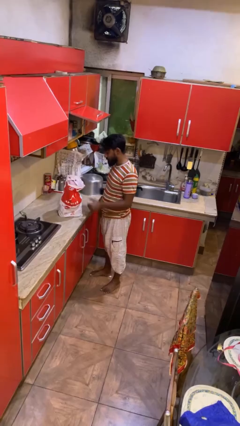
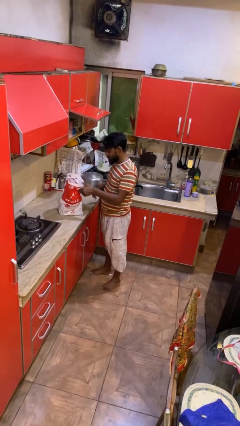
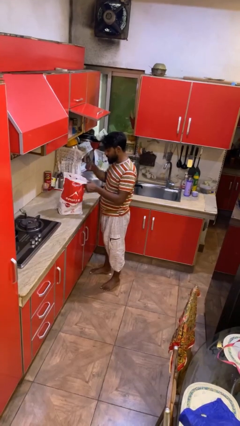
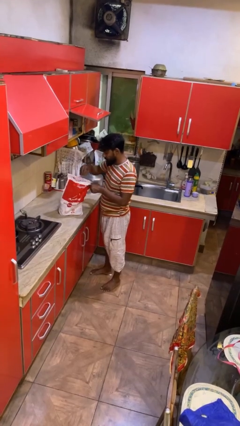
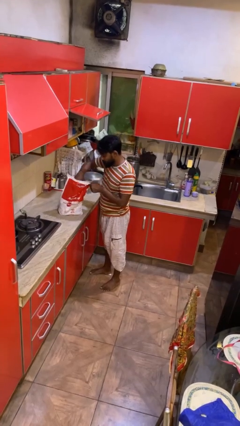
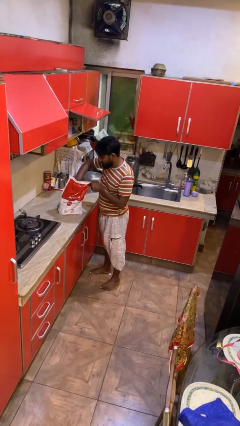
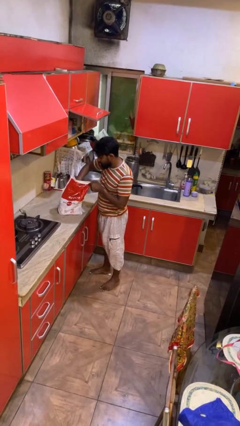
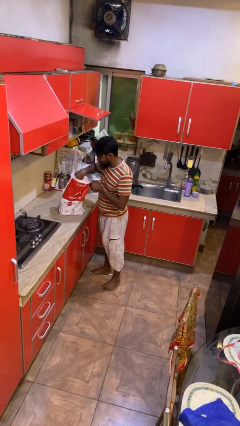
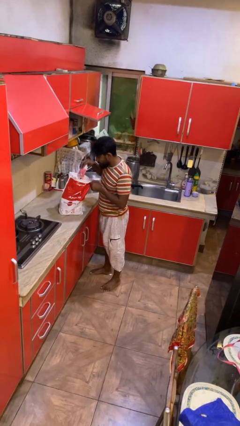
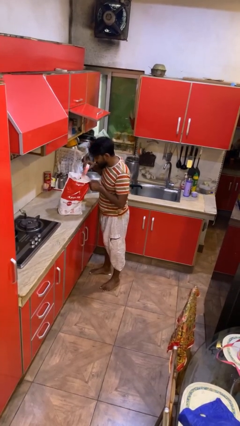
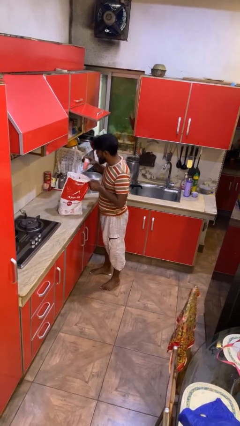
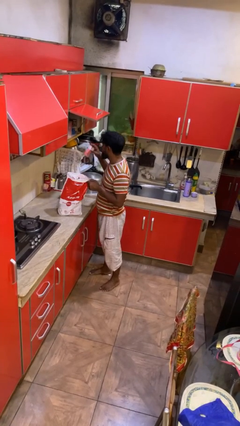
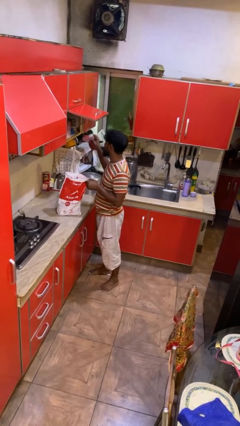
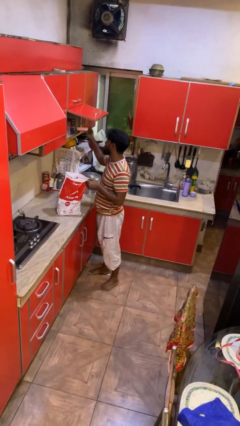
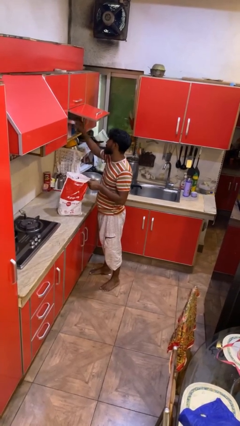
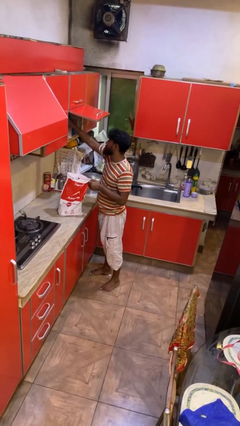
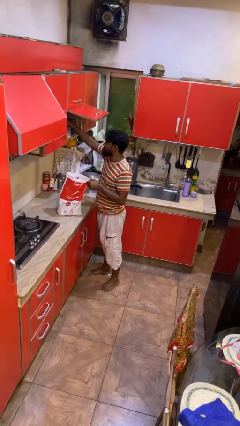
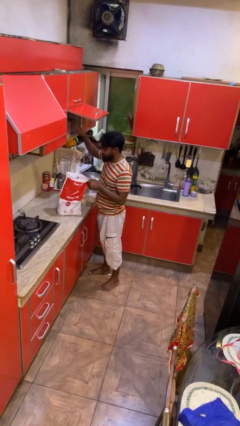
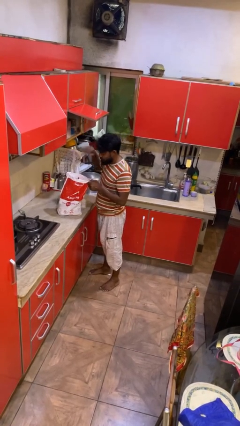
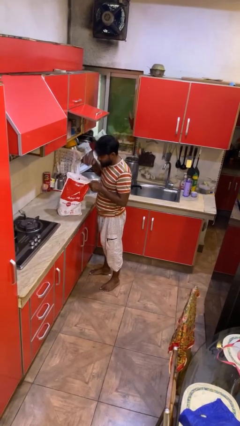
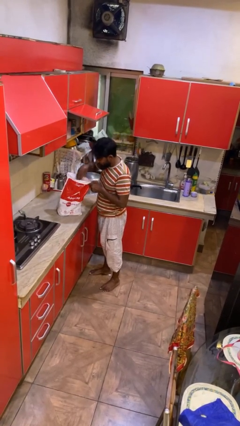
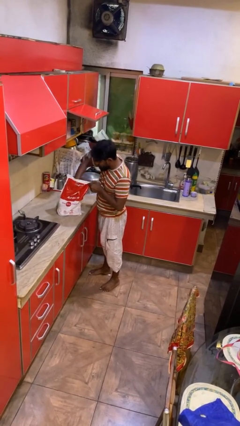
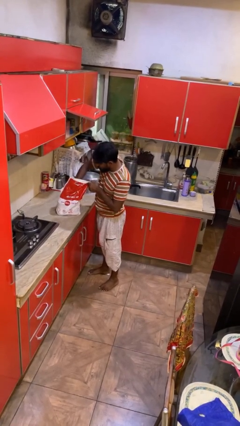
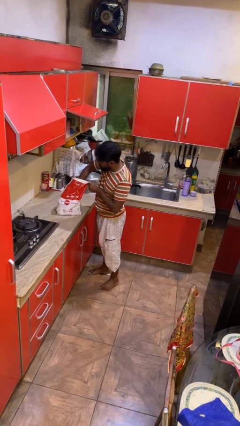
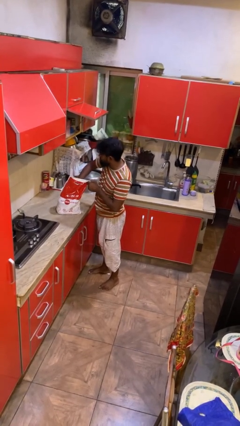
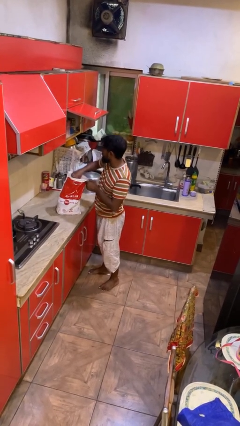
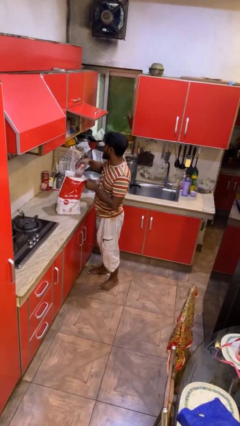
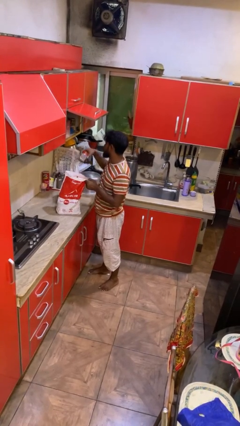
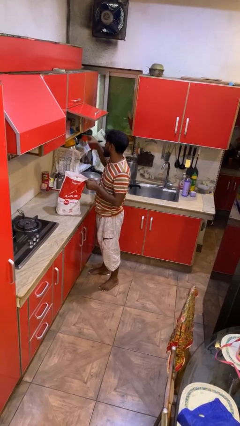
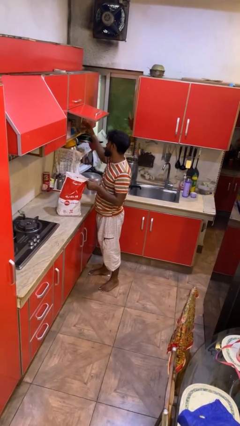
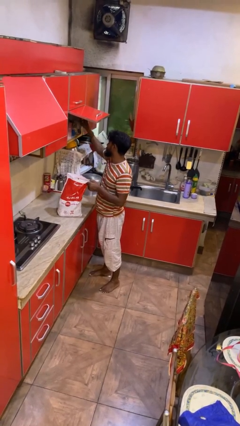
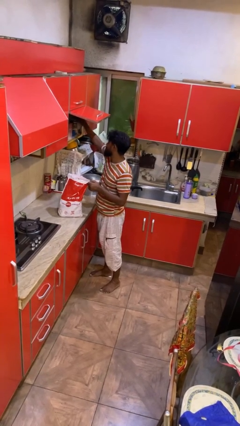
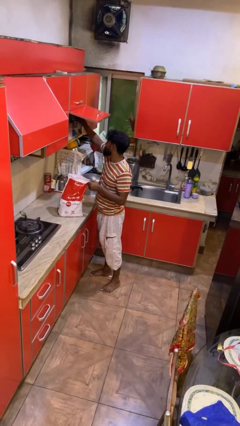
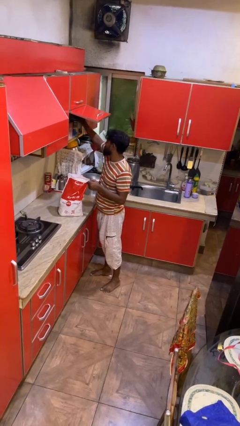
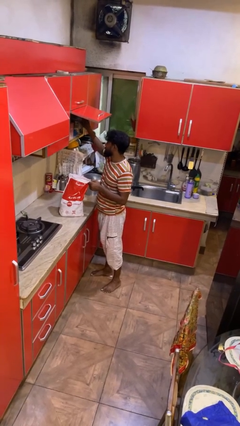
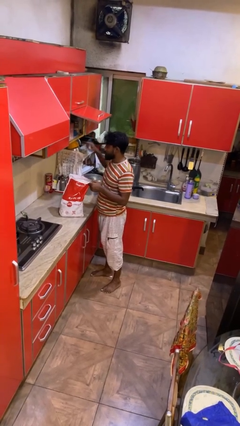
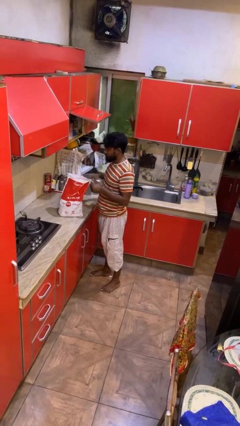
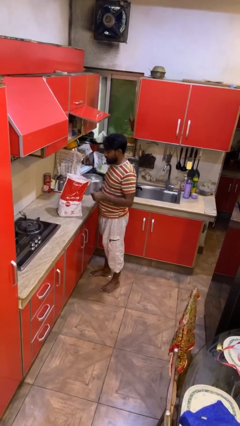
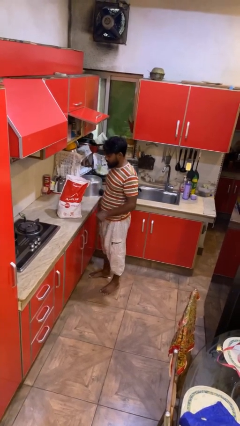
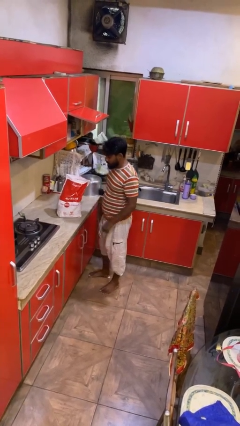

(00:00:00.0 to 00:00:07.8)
person loads groceries into cabinet

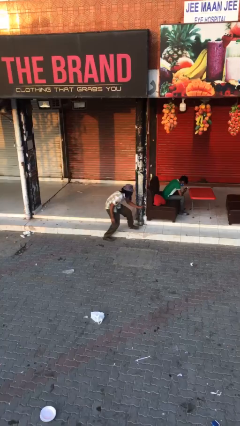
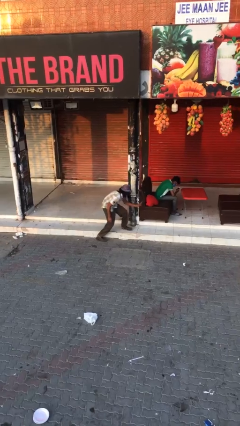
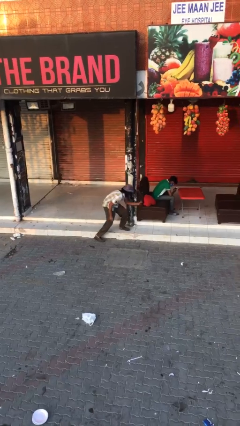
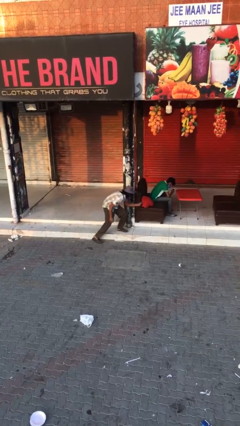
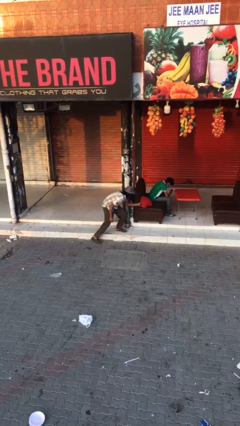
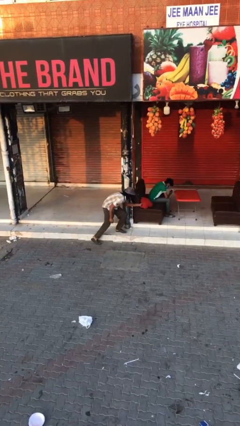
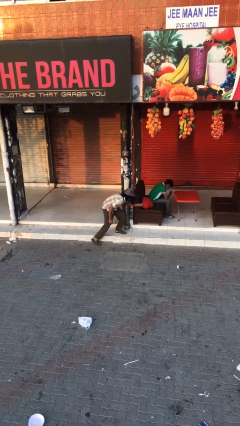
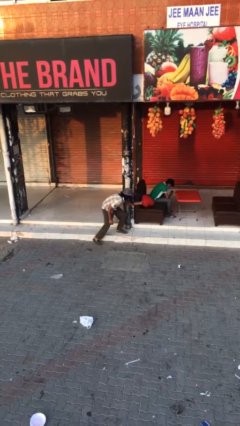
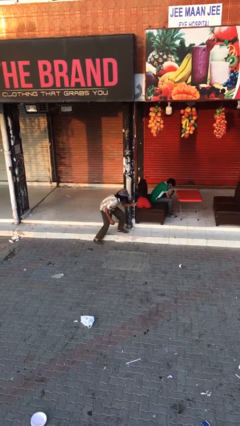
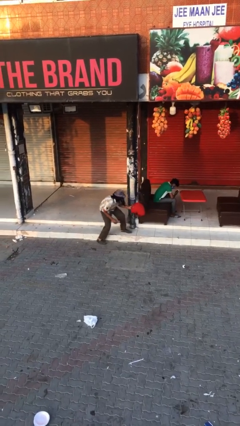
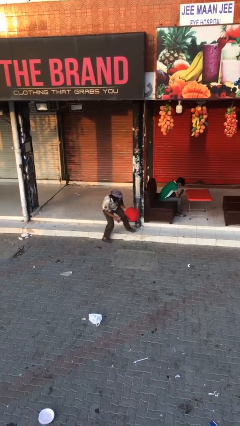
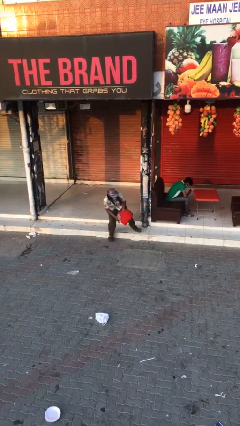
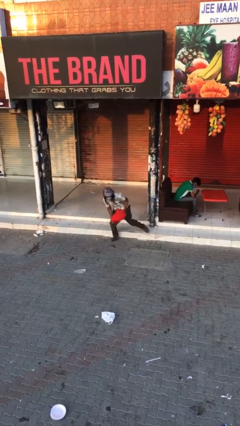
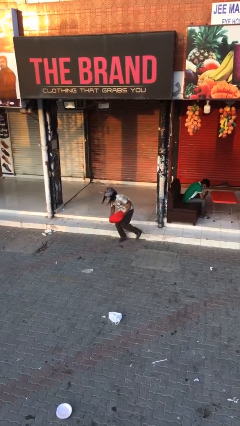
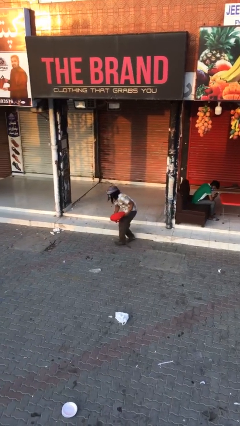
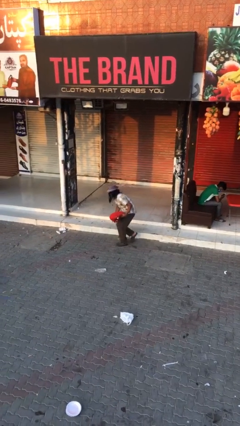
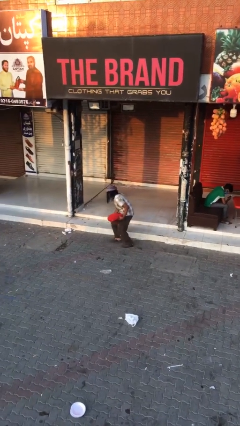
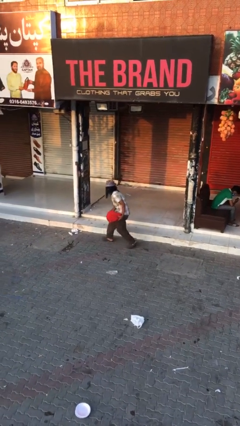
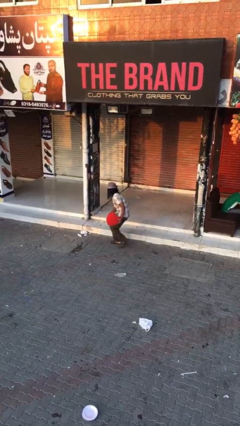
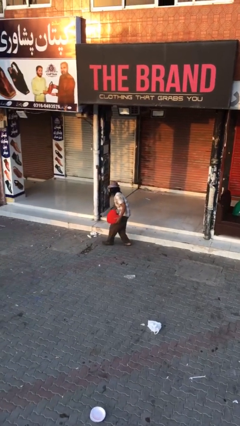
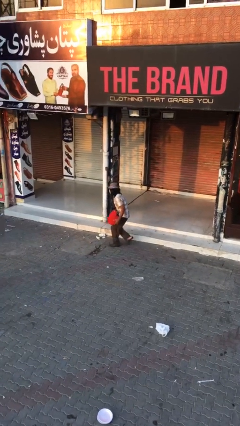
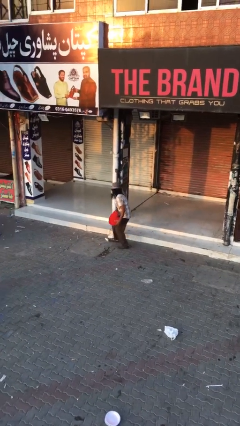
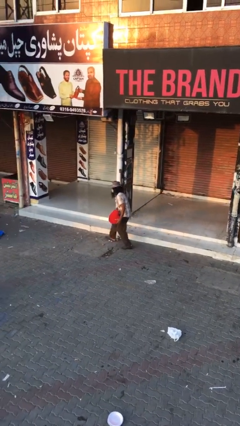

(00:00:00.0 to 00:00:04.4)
person steals object from person

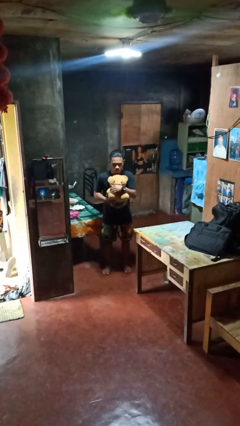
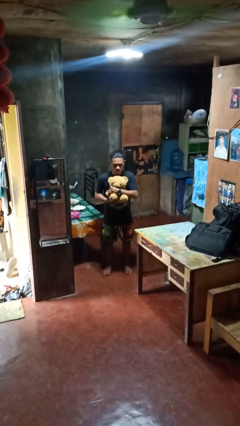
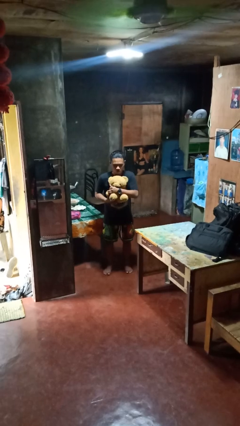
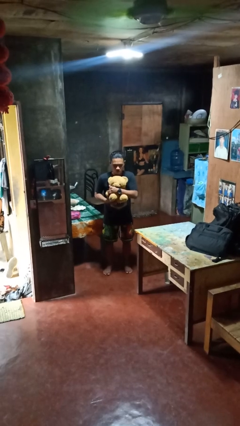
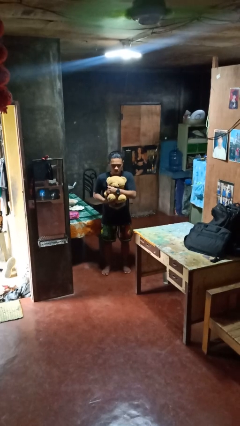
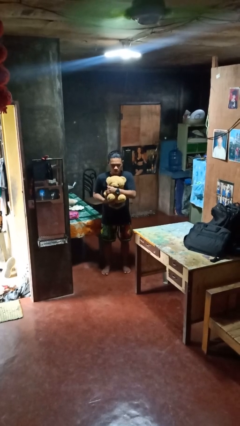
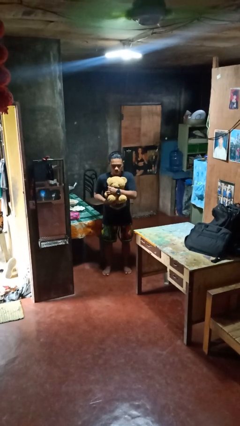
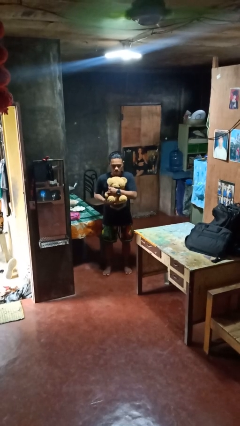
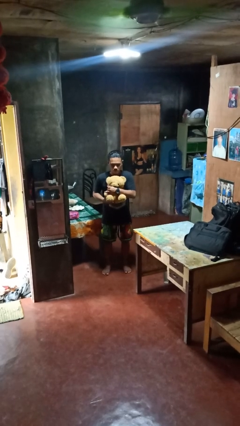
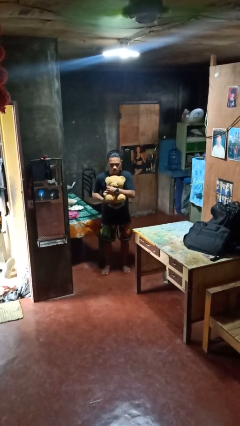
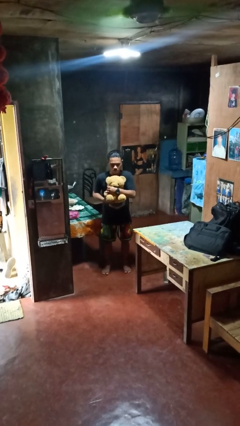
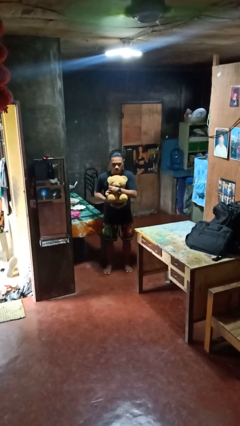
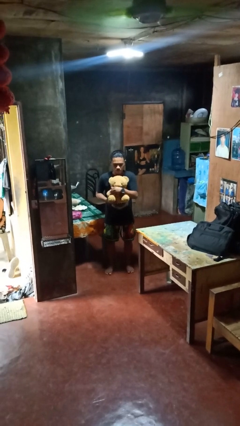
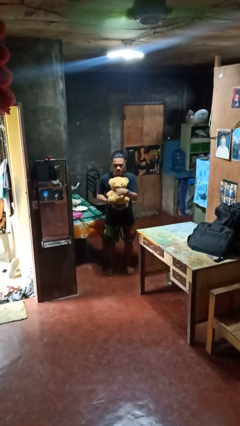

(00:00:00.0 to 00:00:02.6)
person hugs stuffed animal

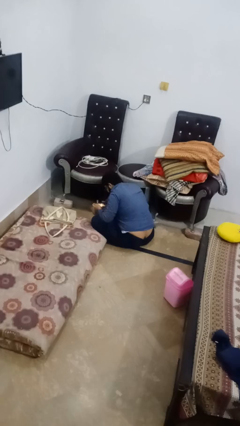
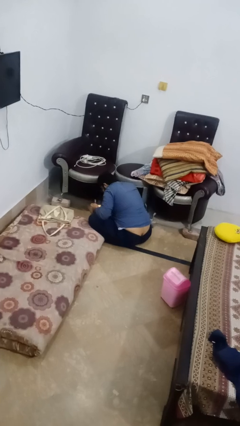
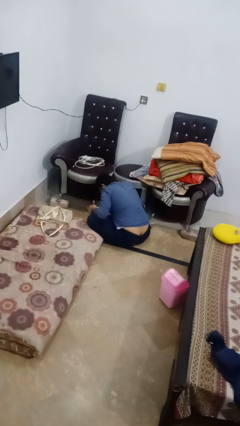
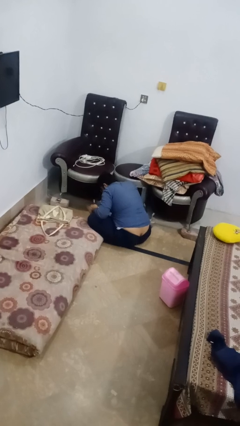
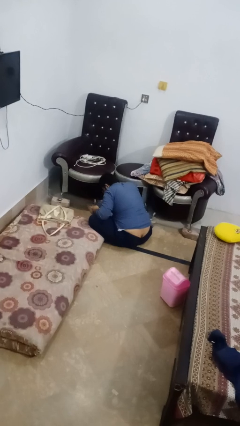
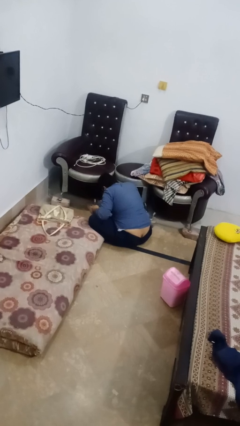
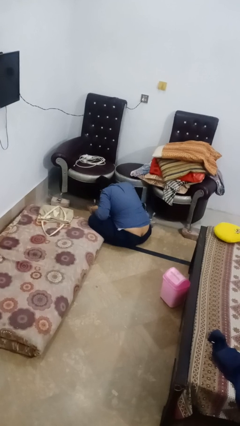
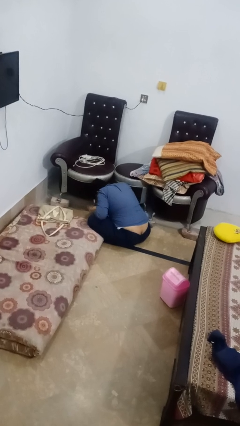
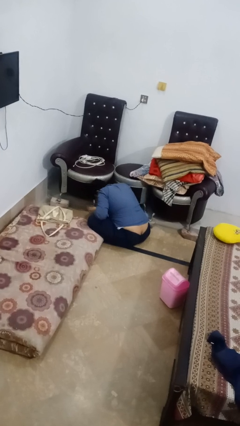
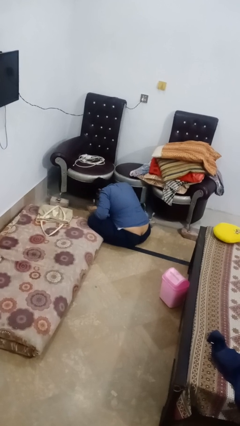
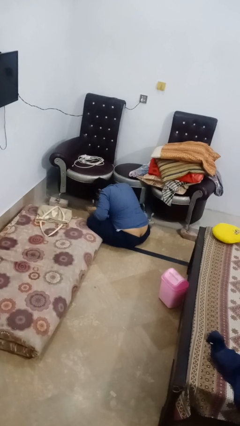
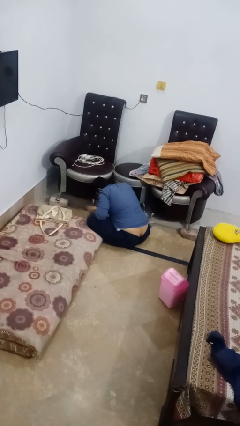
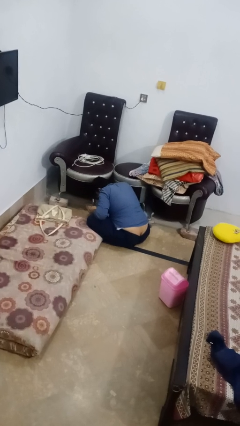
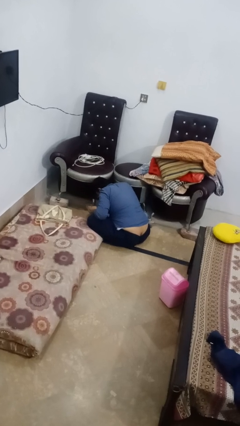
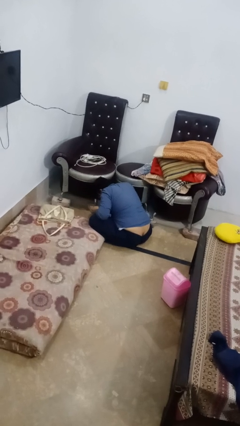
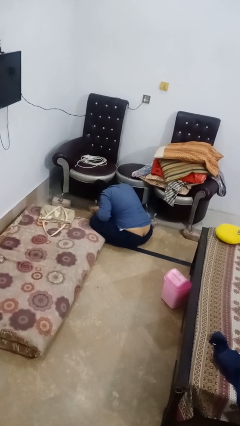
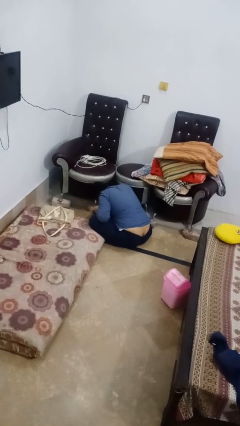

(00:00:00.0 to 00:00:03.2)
person searches under couch
